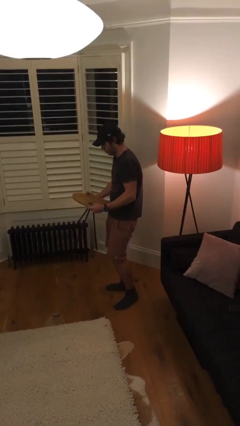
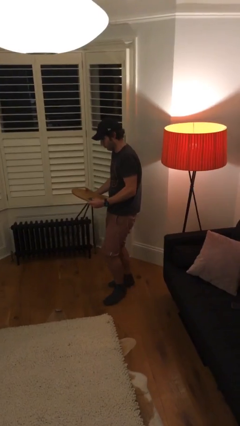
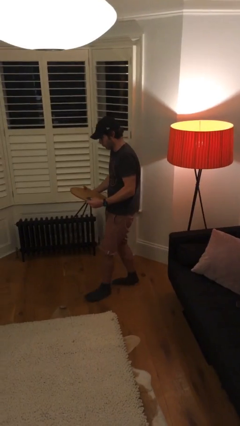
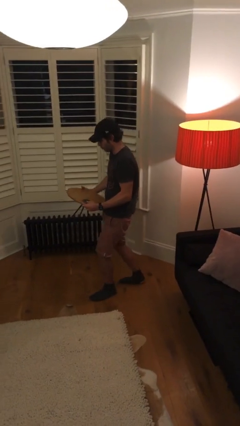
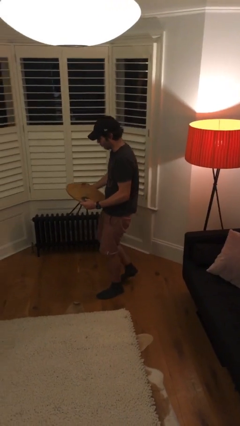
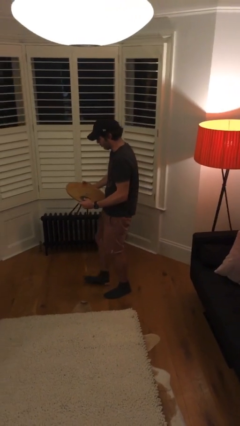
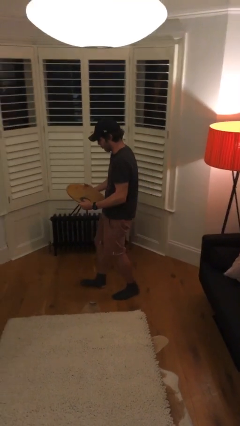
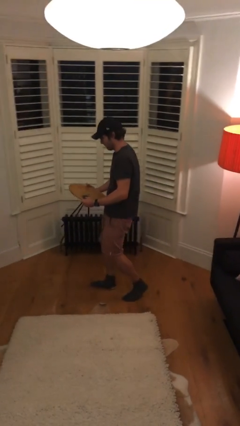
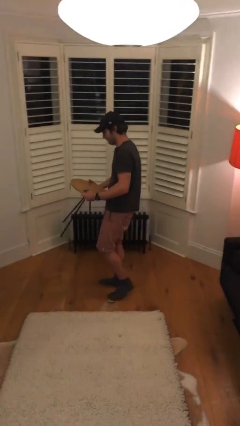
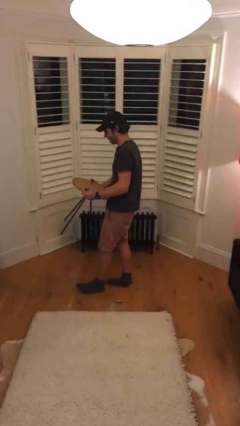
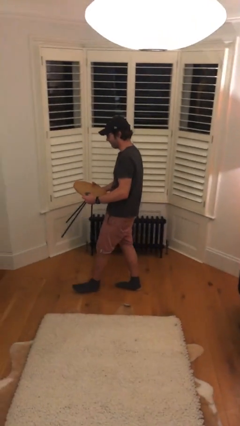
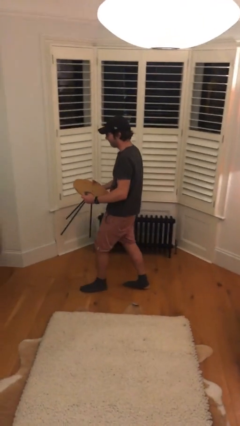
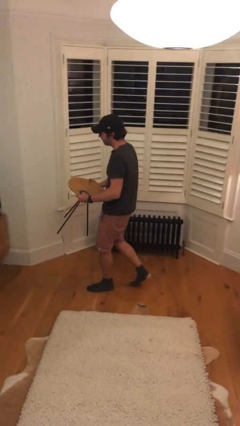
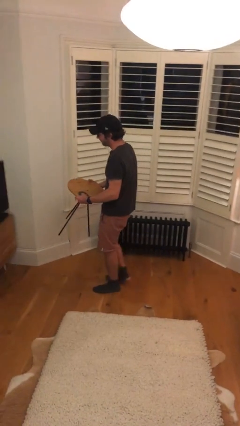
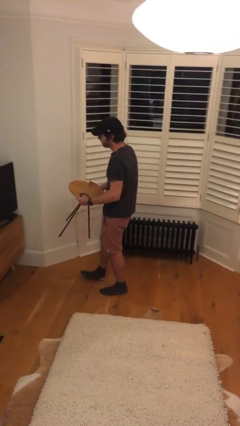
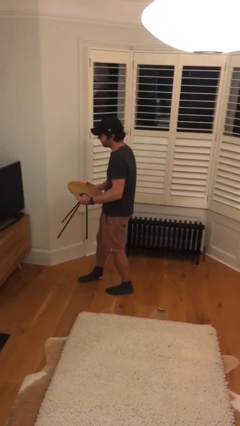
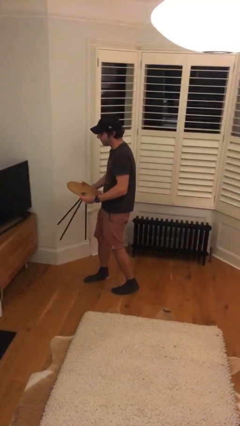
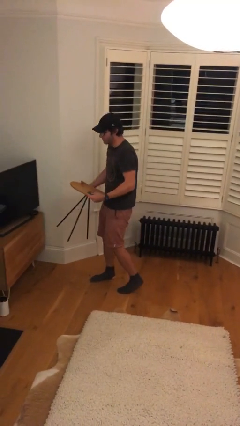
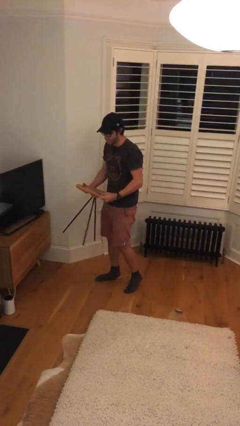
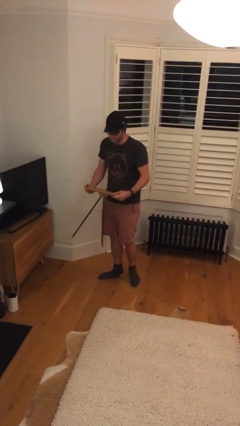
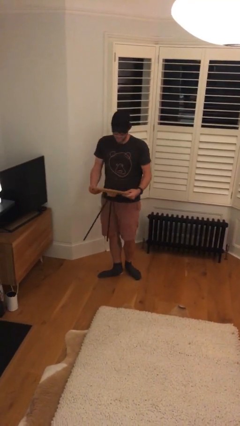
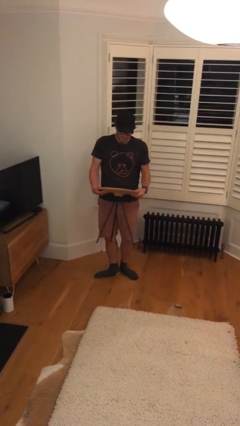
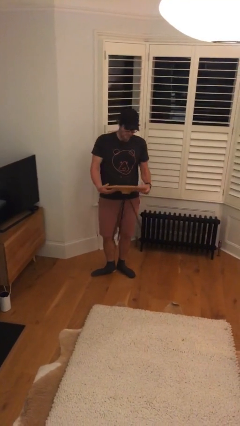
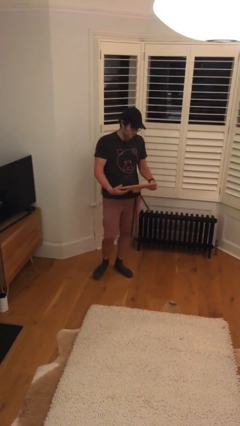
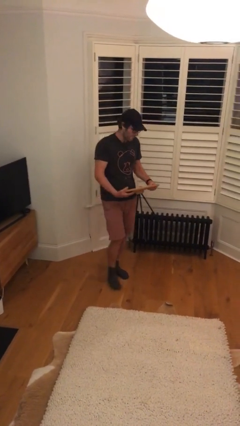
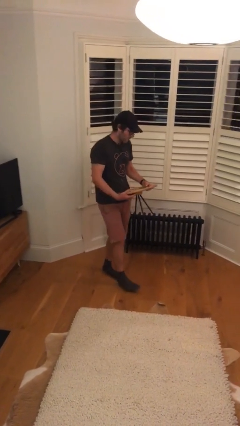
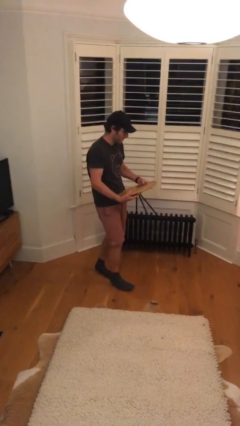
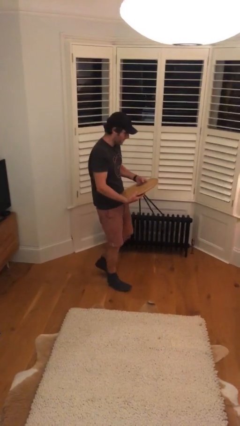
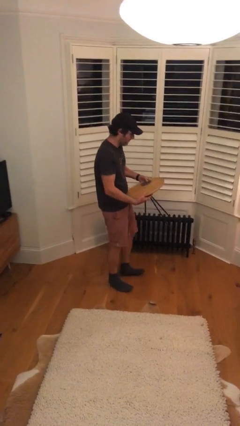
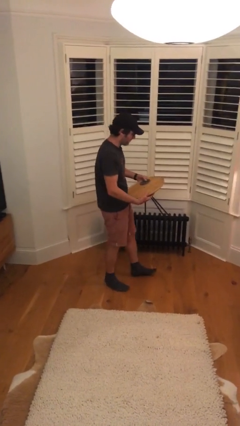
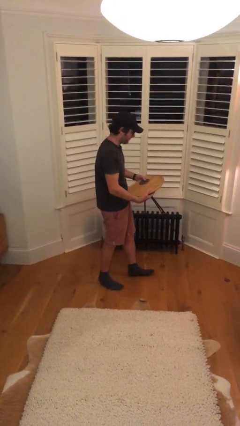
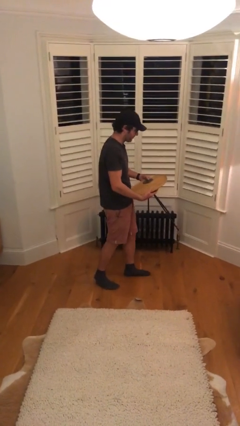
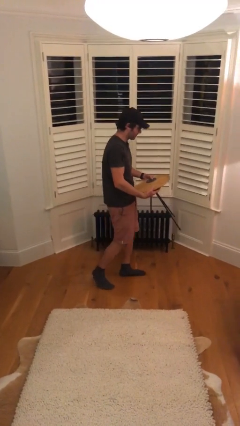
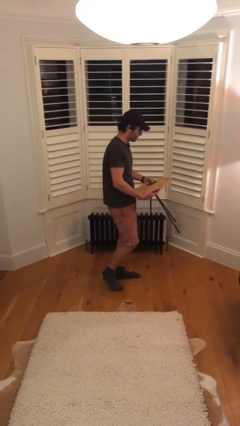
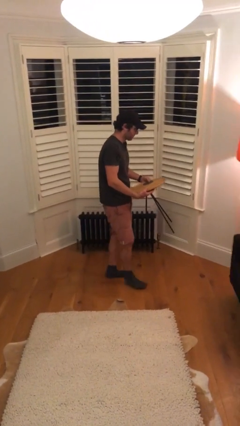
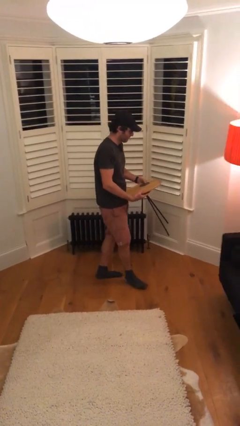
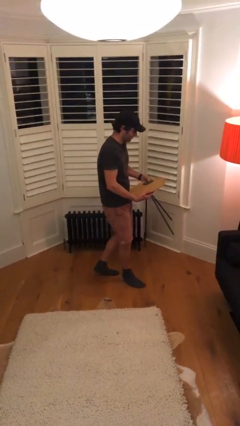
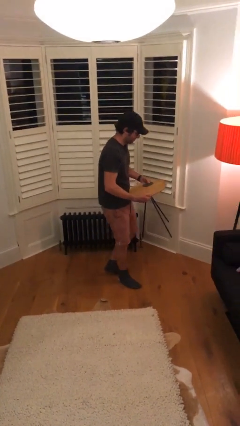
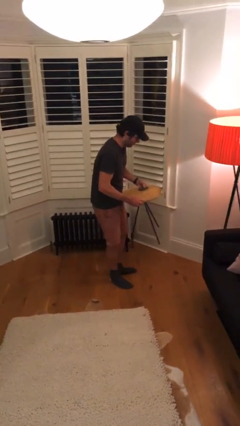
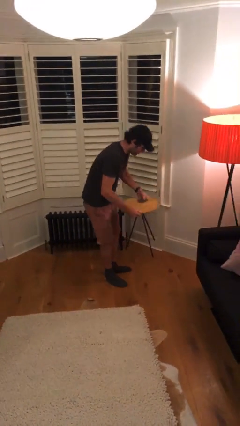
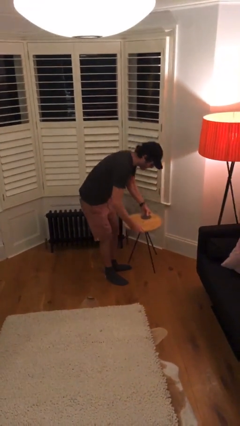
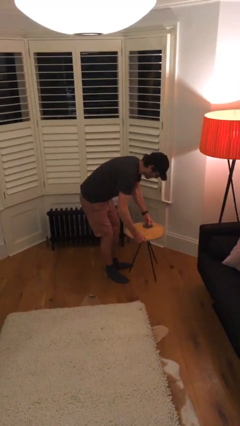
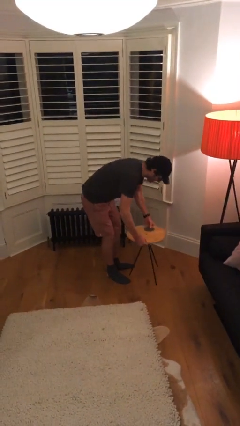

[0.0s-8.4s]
person carries heavy object

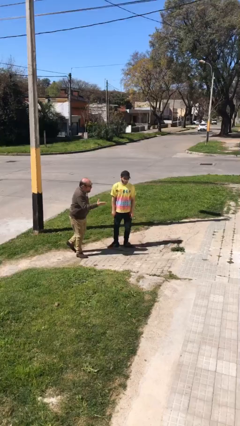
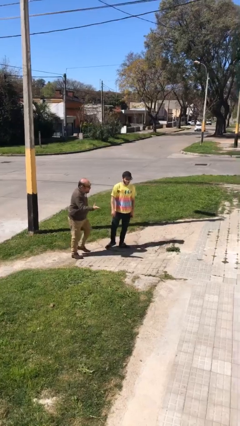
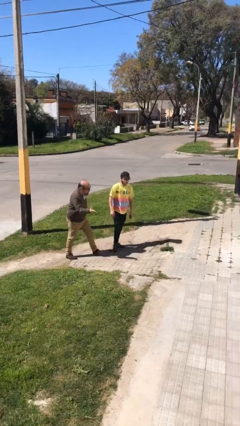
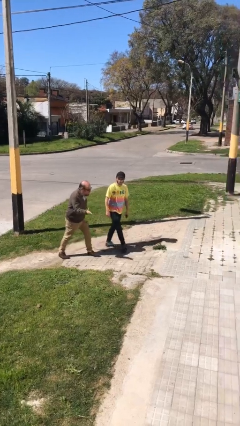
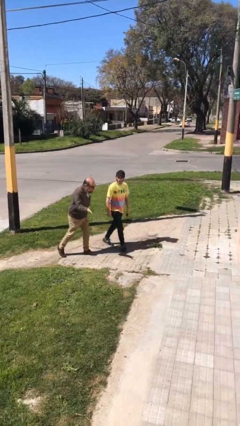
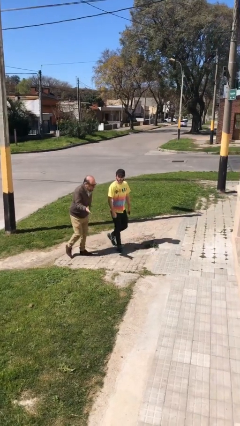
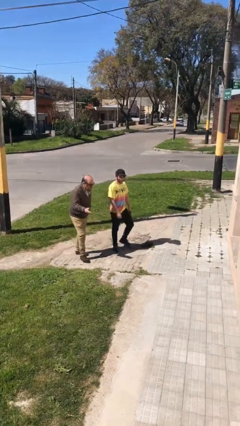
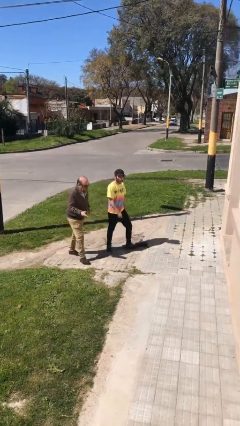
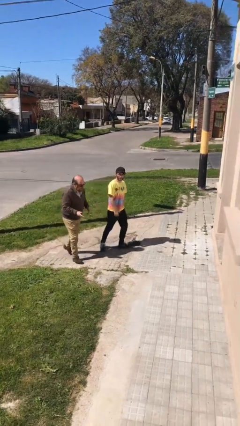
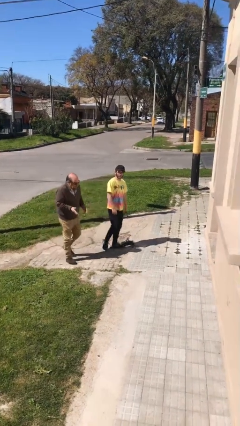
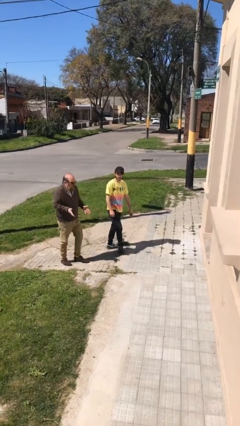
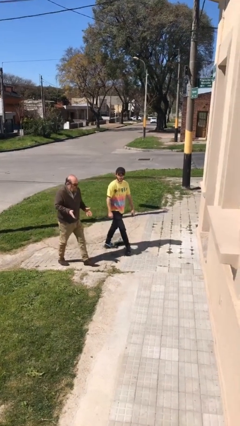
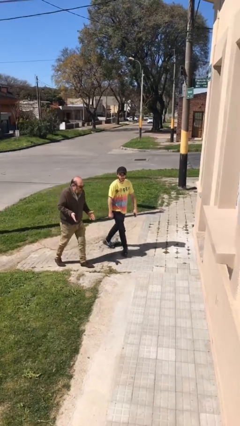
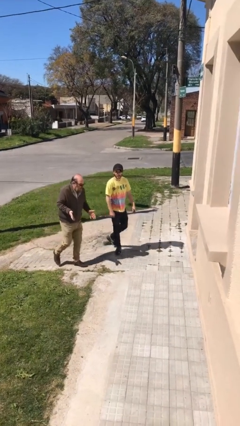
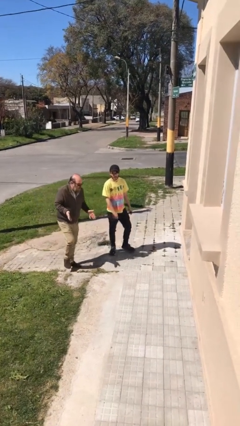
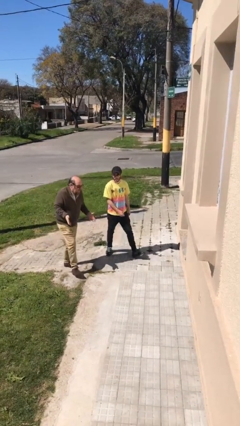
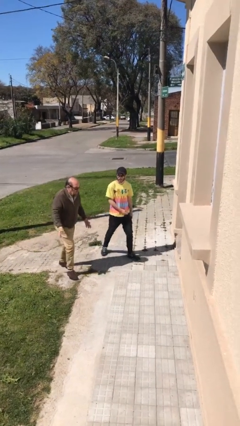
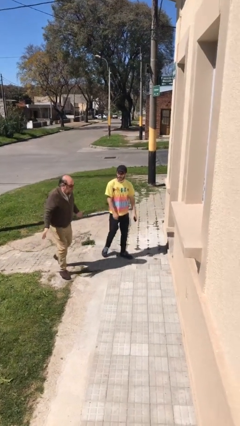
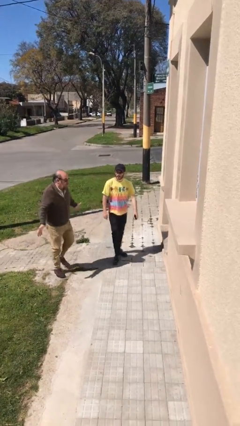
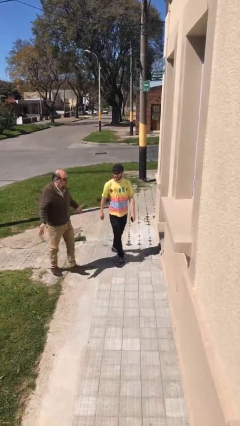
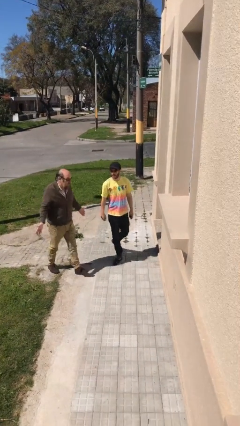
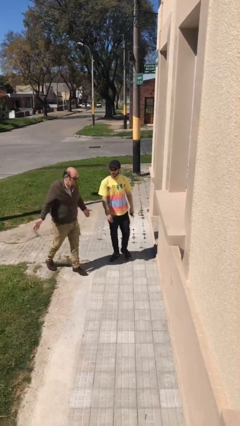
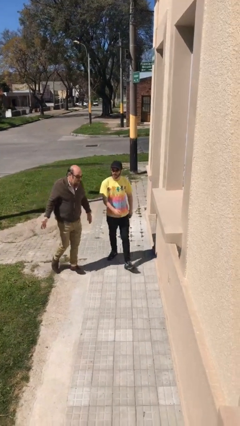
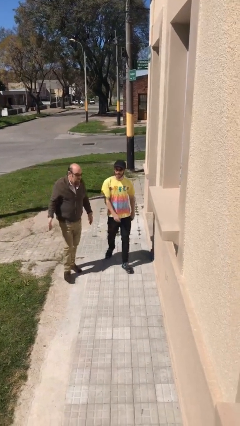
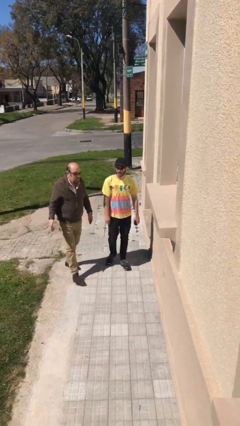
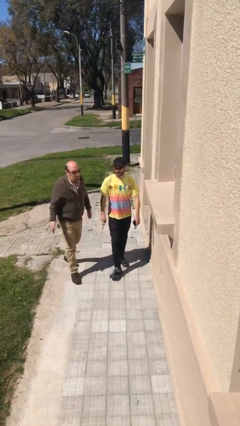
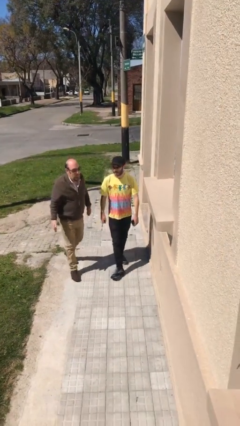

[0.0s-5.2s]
person talks to person

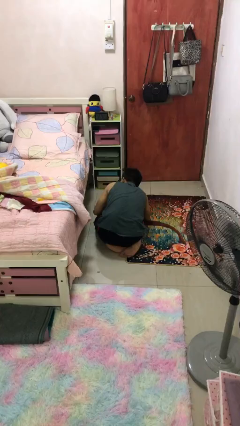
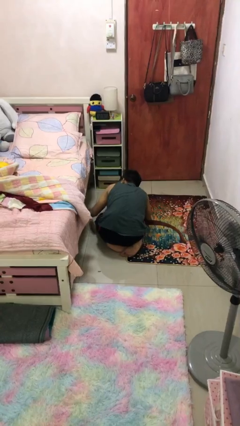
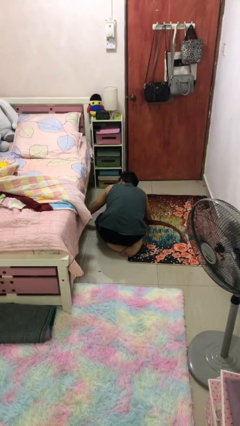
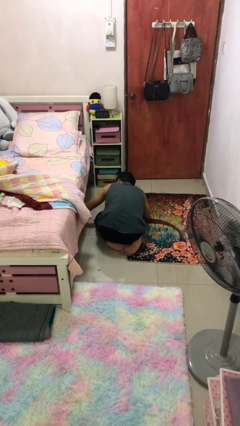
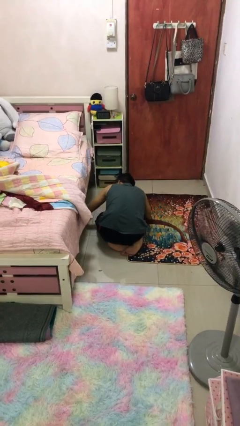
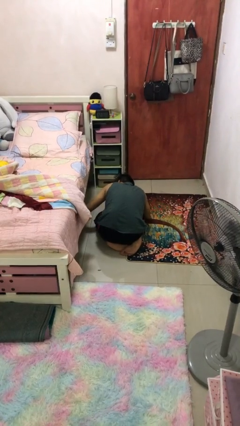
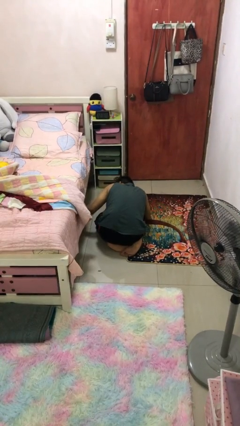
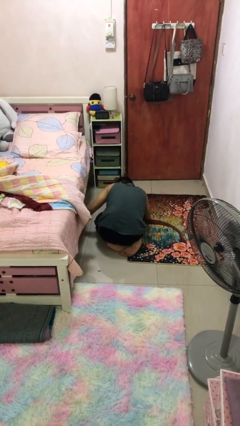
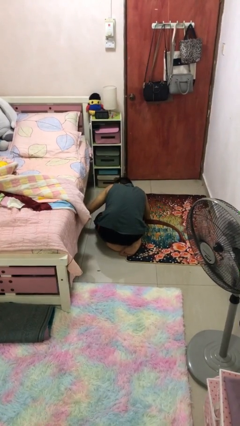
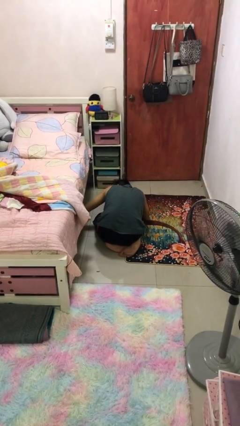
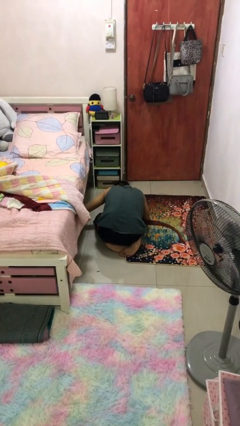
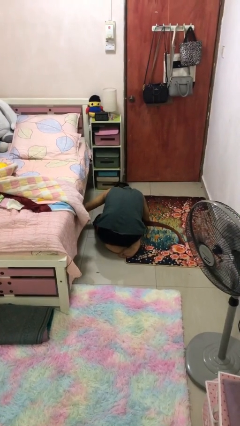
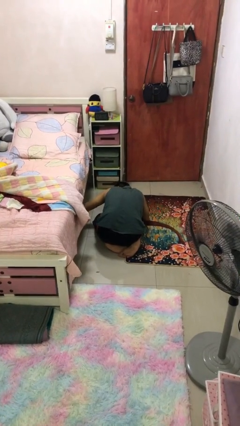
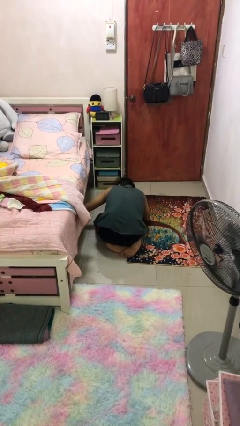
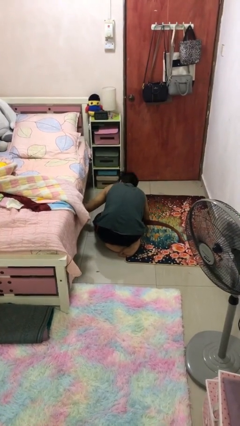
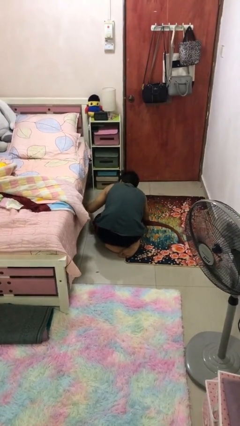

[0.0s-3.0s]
person searches under bed

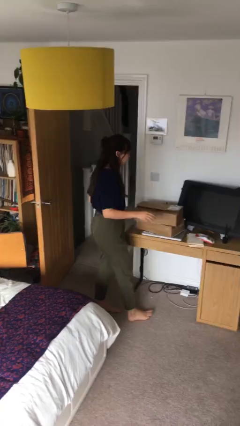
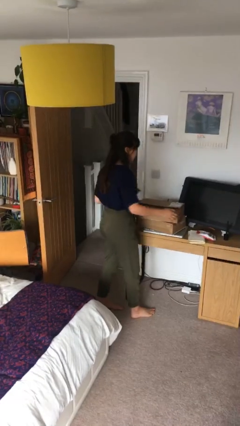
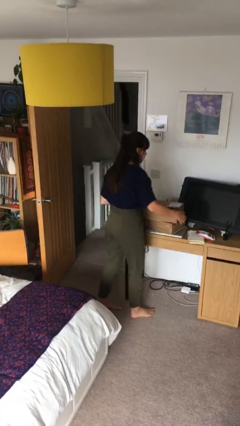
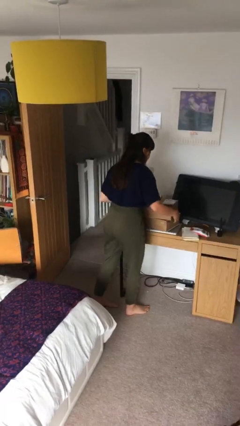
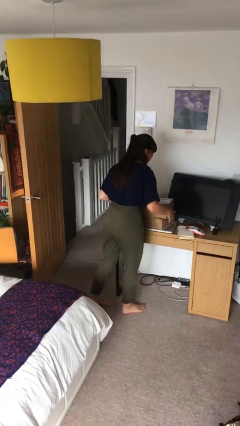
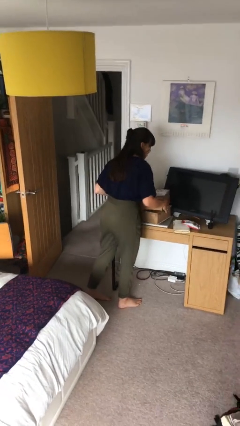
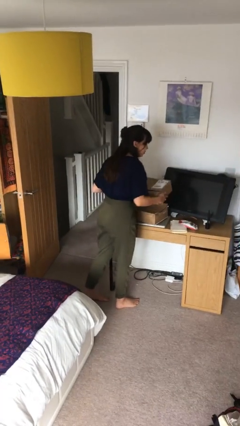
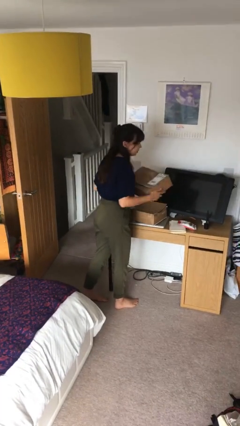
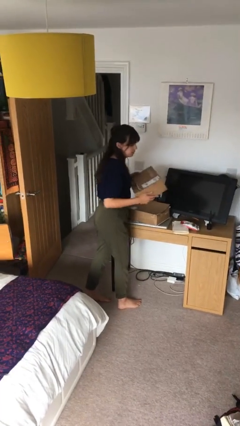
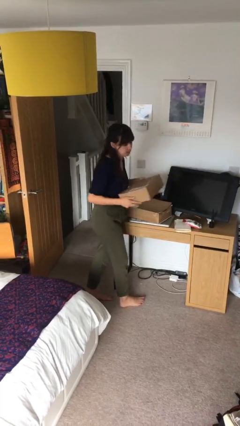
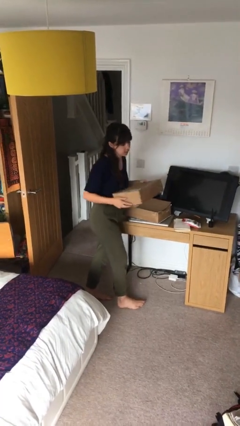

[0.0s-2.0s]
person picks up object from table
